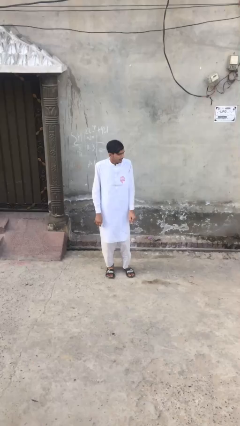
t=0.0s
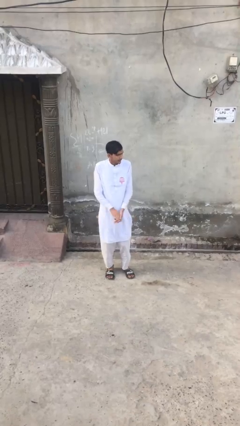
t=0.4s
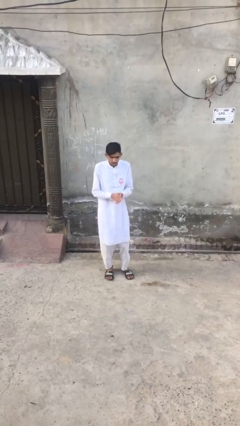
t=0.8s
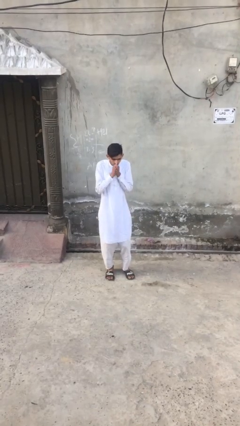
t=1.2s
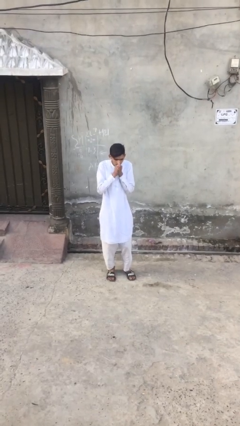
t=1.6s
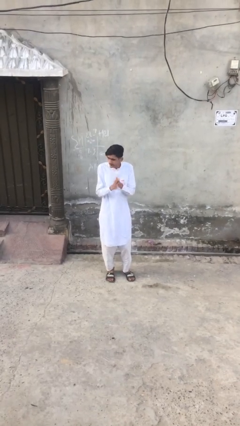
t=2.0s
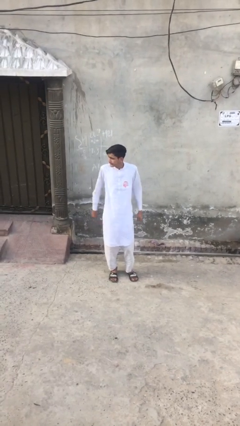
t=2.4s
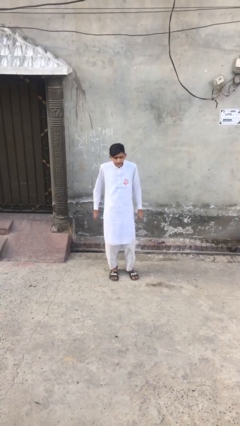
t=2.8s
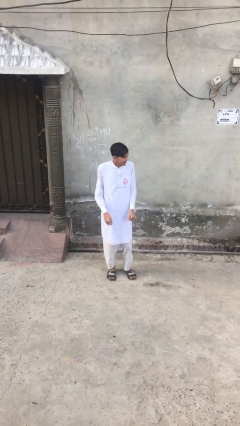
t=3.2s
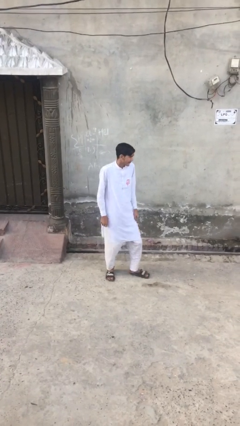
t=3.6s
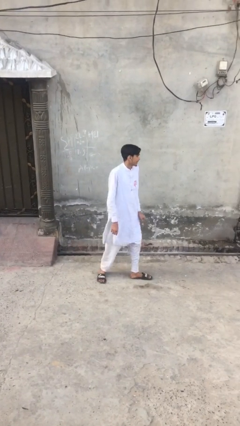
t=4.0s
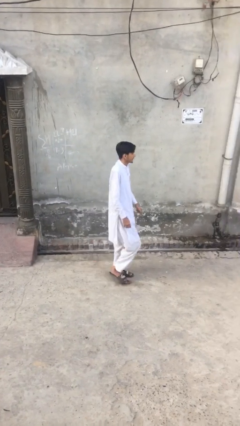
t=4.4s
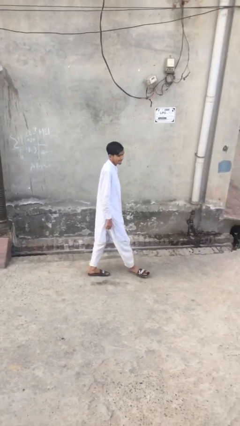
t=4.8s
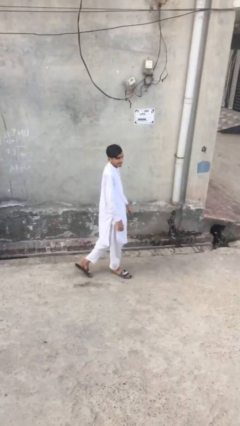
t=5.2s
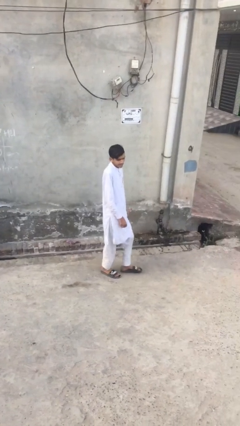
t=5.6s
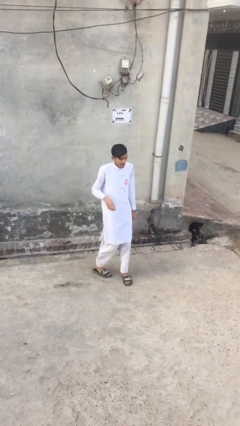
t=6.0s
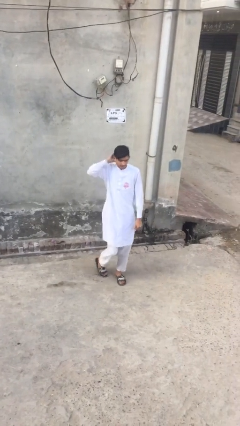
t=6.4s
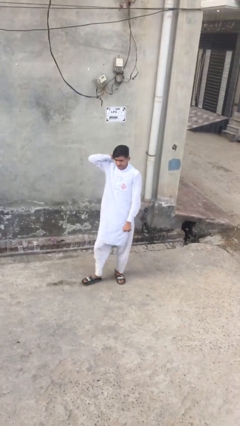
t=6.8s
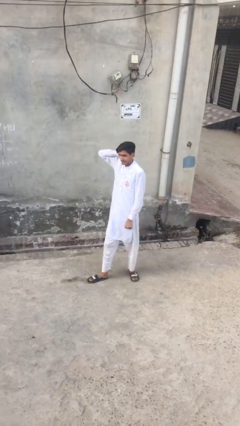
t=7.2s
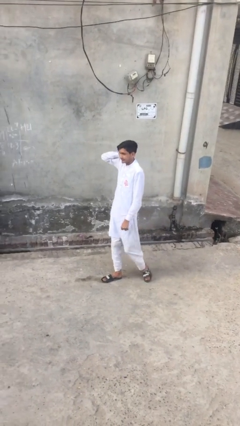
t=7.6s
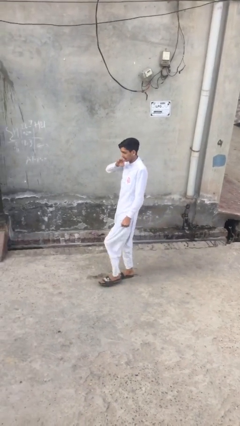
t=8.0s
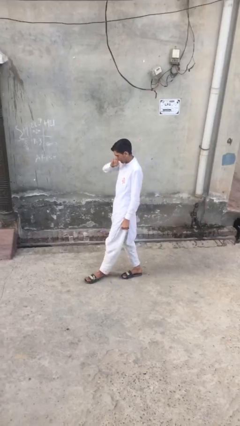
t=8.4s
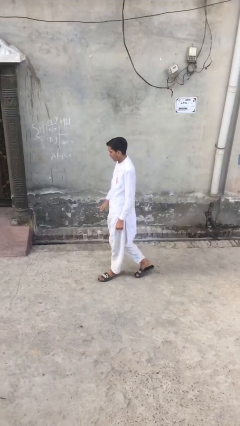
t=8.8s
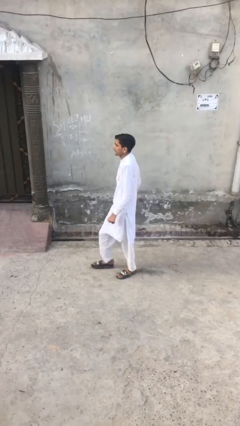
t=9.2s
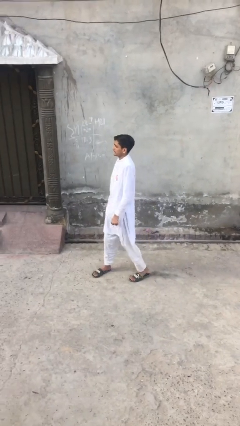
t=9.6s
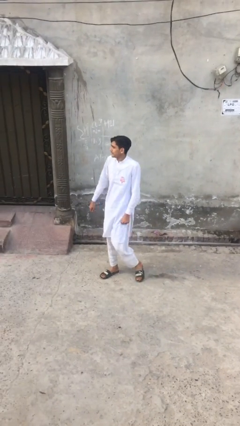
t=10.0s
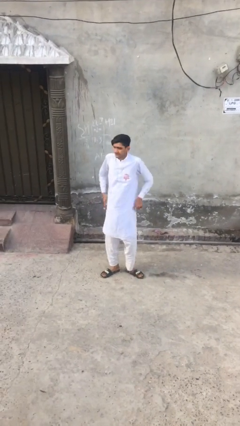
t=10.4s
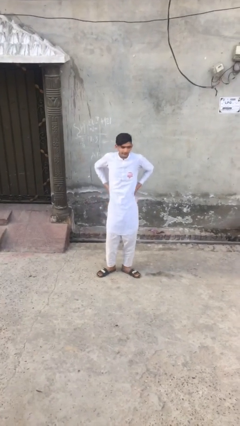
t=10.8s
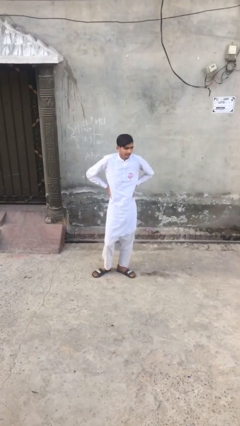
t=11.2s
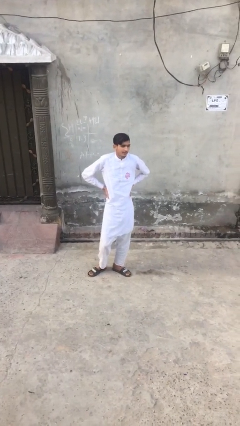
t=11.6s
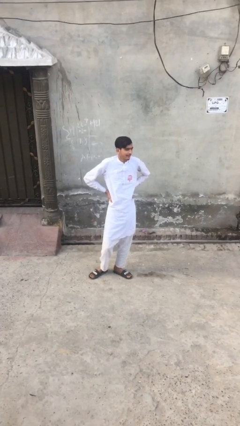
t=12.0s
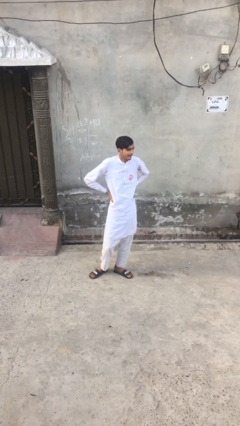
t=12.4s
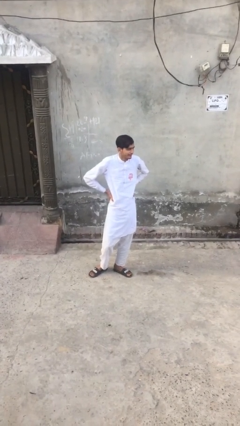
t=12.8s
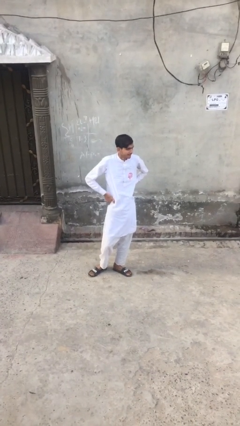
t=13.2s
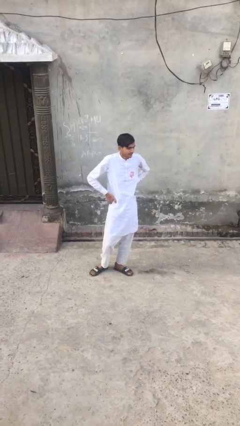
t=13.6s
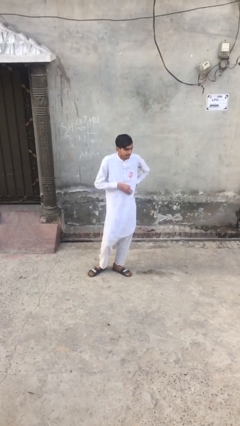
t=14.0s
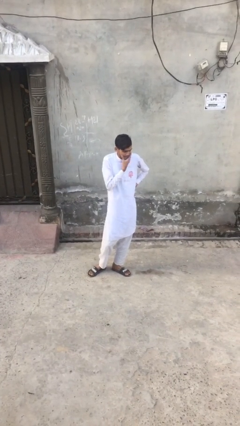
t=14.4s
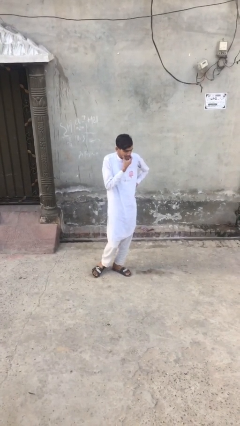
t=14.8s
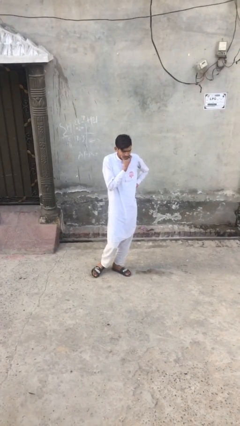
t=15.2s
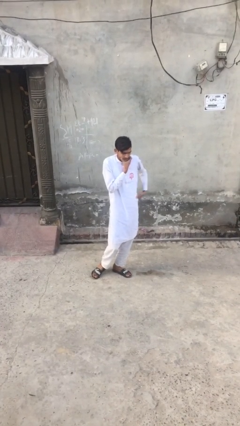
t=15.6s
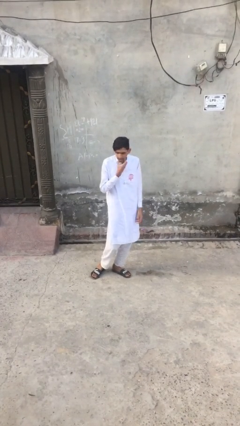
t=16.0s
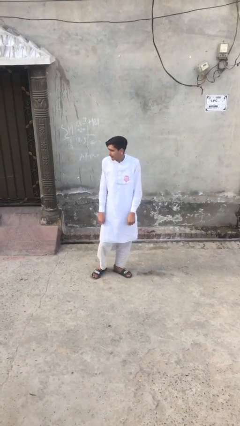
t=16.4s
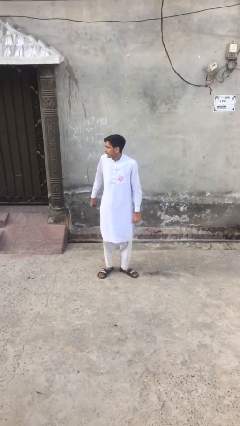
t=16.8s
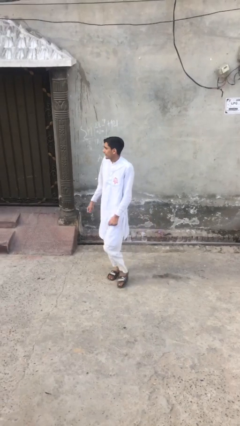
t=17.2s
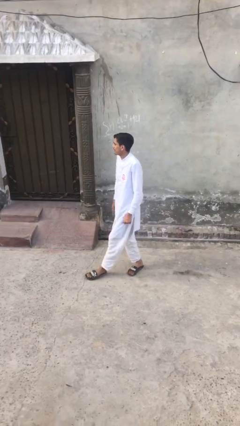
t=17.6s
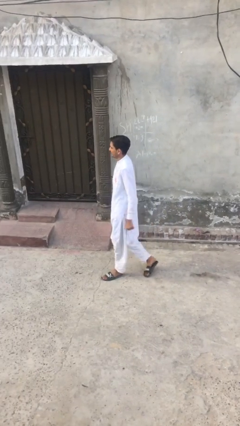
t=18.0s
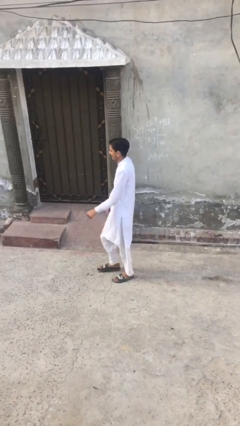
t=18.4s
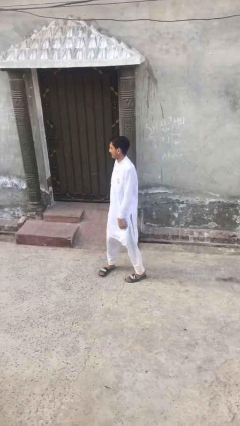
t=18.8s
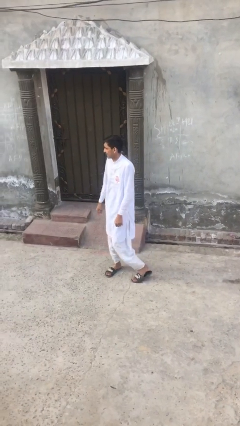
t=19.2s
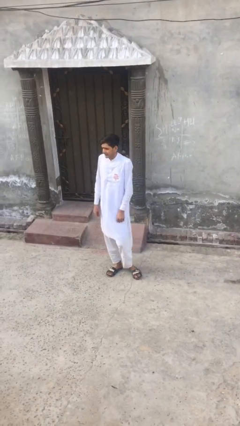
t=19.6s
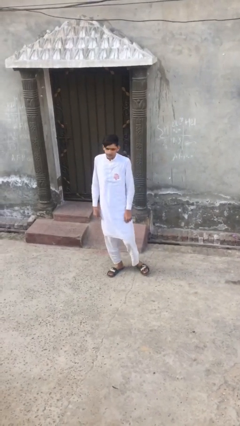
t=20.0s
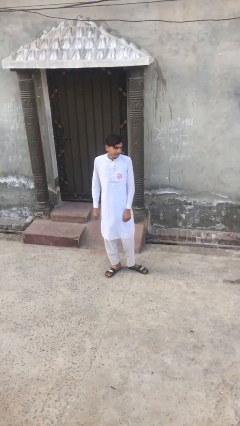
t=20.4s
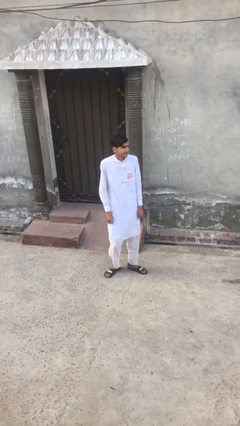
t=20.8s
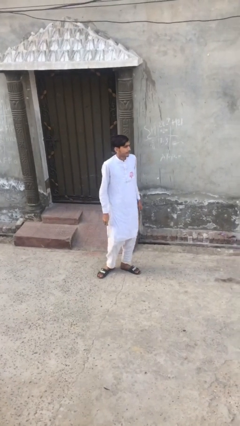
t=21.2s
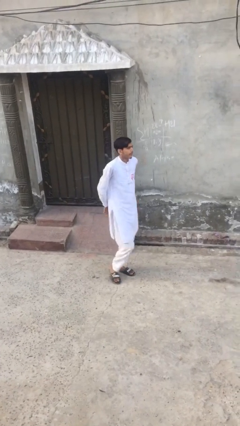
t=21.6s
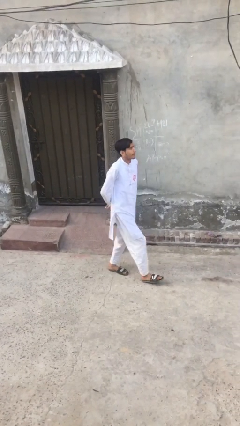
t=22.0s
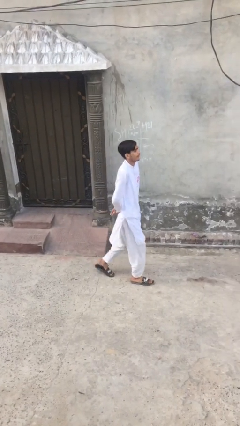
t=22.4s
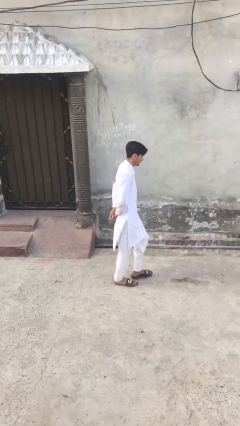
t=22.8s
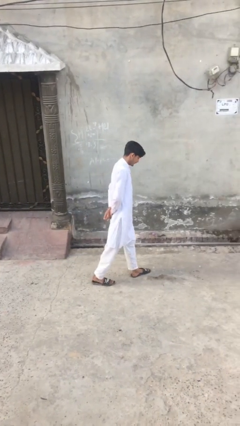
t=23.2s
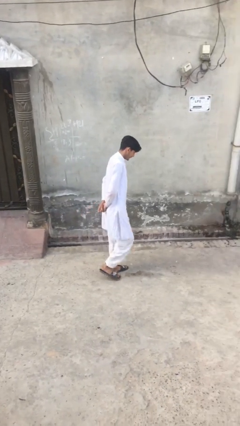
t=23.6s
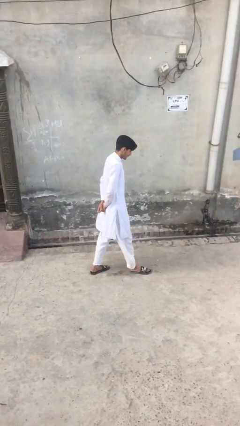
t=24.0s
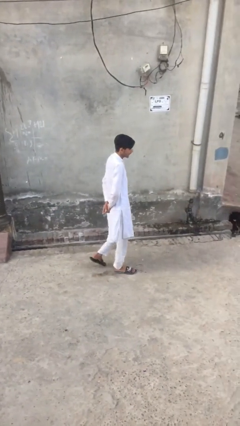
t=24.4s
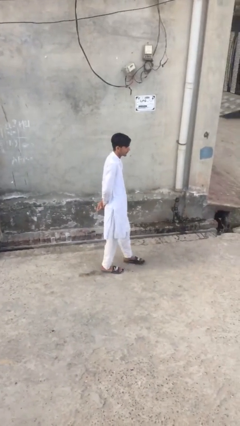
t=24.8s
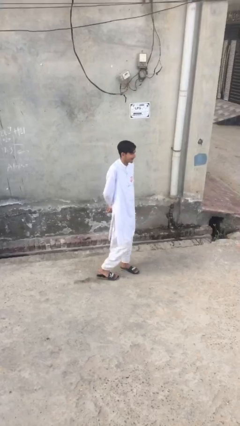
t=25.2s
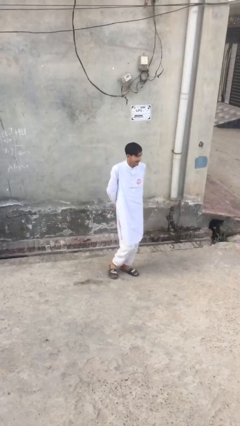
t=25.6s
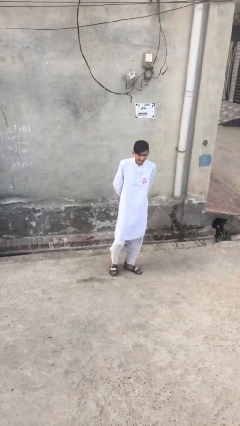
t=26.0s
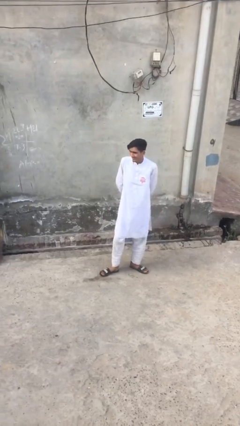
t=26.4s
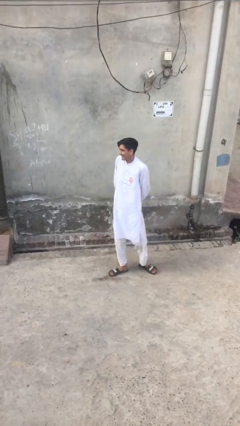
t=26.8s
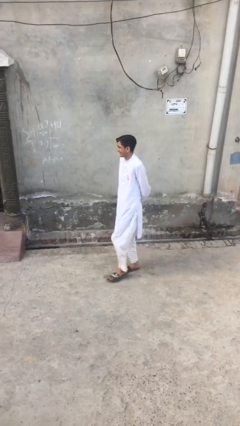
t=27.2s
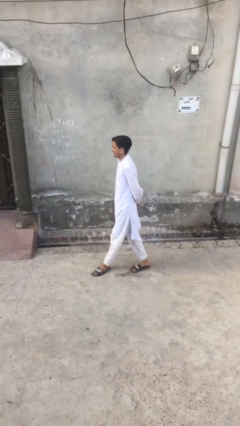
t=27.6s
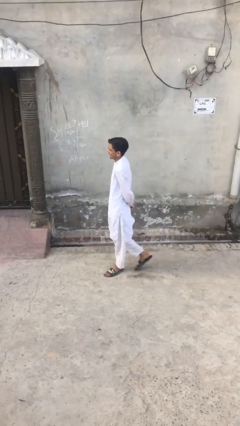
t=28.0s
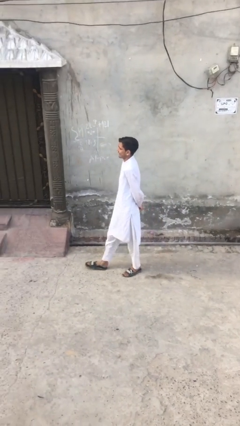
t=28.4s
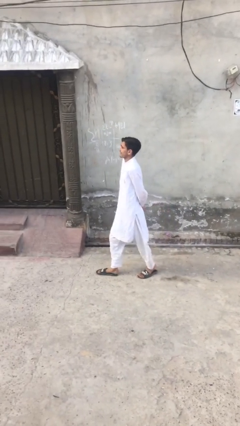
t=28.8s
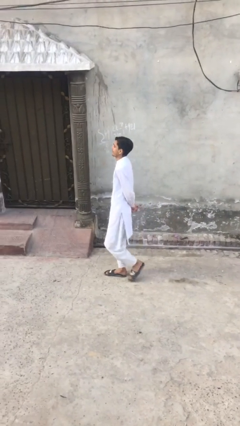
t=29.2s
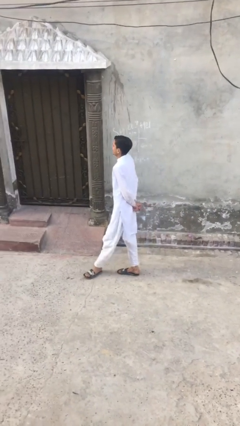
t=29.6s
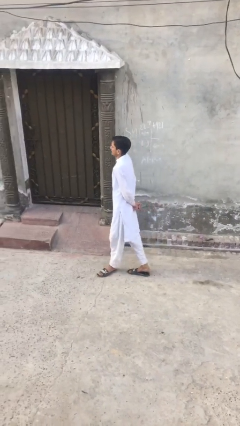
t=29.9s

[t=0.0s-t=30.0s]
person walks

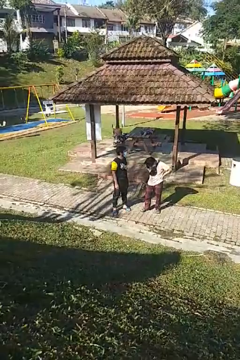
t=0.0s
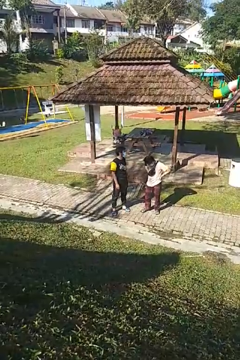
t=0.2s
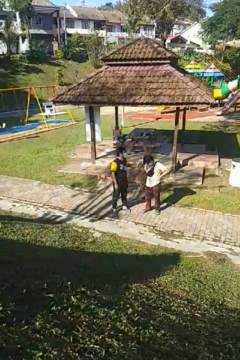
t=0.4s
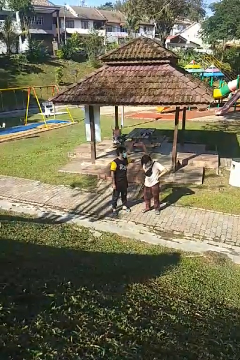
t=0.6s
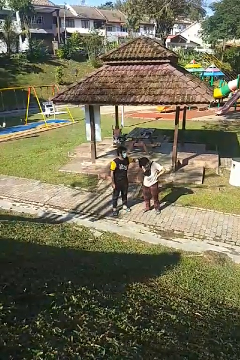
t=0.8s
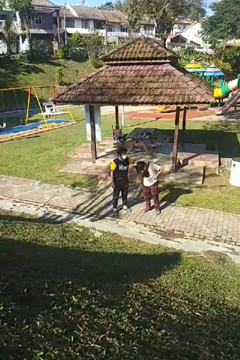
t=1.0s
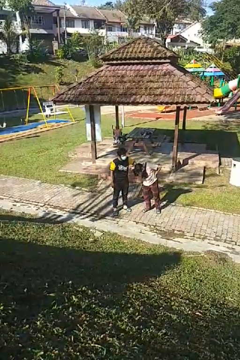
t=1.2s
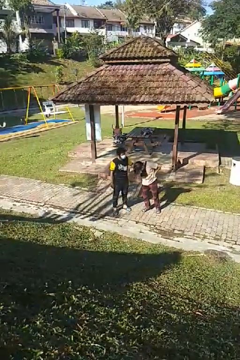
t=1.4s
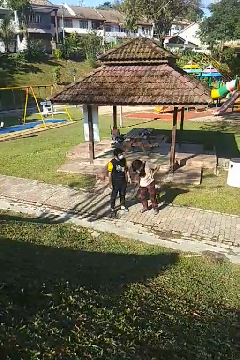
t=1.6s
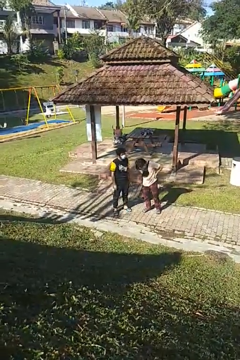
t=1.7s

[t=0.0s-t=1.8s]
person grabs person by hair

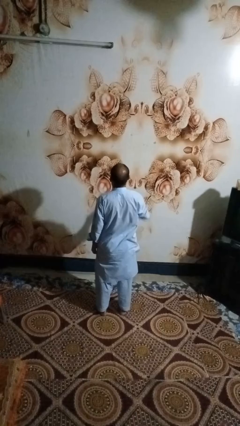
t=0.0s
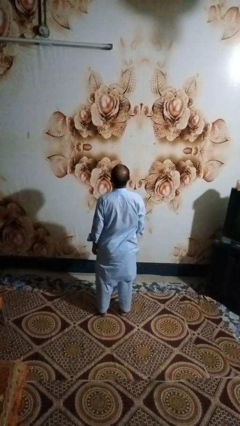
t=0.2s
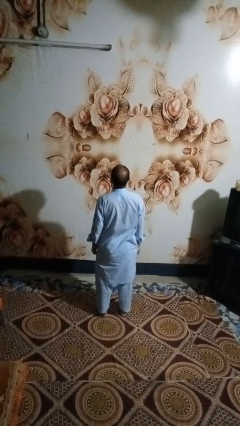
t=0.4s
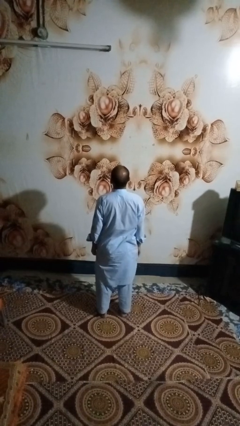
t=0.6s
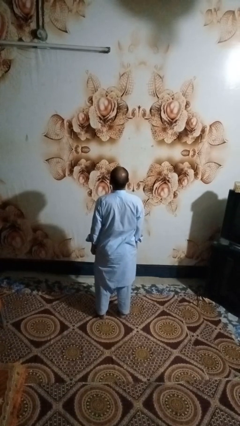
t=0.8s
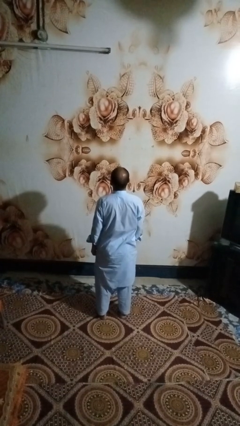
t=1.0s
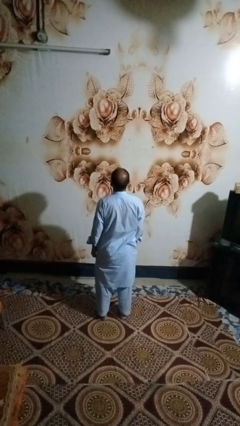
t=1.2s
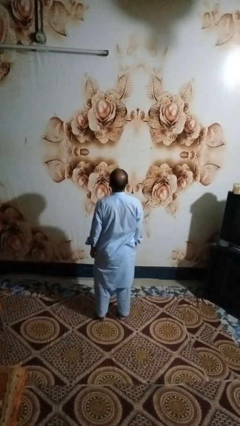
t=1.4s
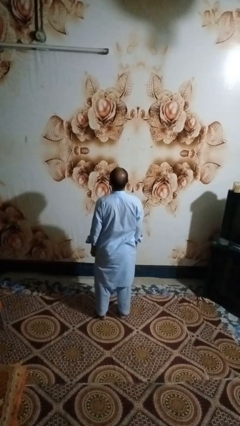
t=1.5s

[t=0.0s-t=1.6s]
person gestures lower hand
